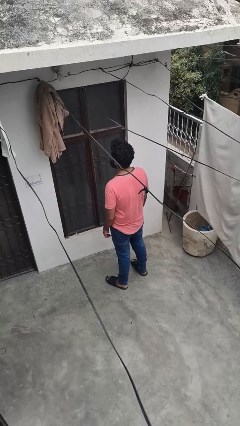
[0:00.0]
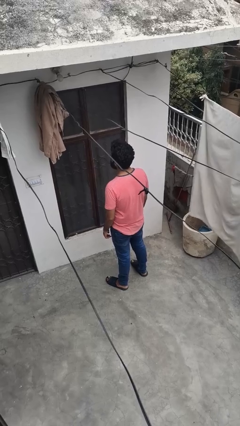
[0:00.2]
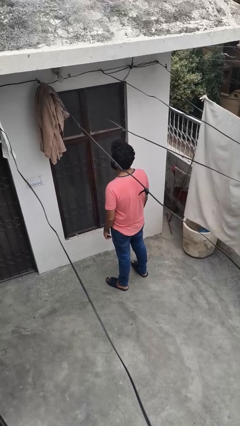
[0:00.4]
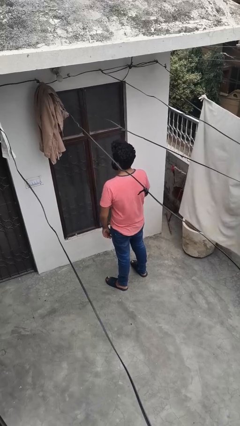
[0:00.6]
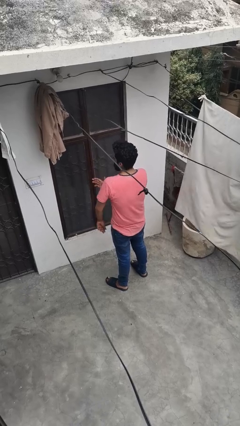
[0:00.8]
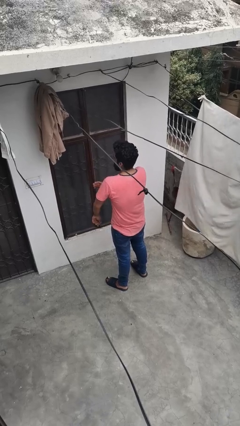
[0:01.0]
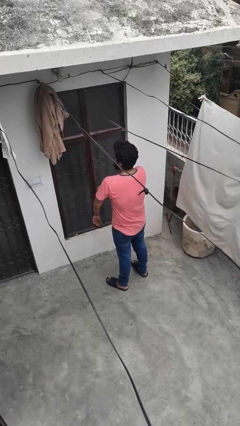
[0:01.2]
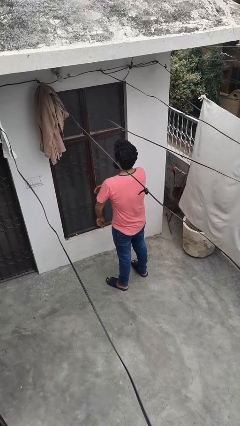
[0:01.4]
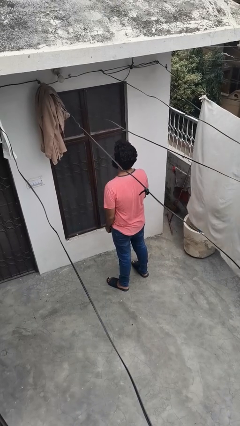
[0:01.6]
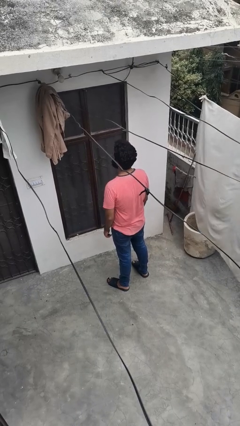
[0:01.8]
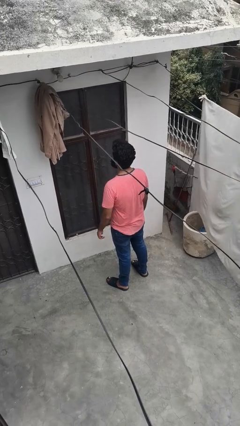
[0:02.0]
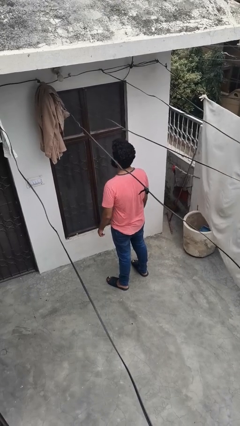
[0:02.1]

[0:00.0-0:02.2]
person swats bug

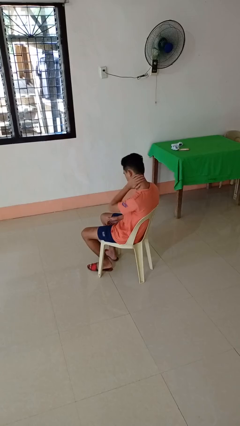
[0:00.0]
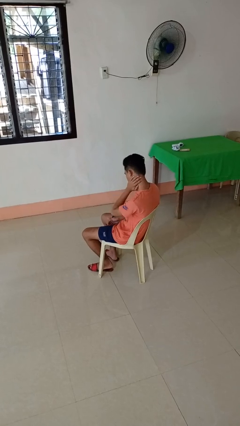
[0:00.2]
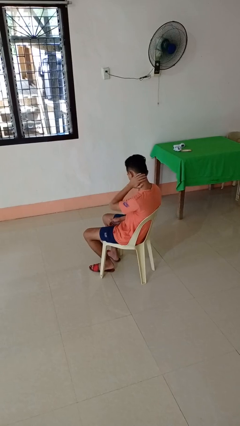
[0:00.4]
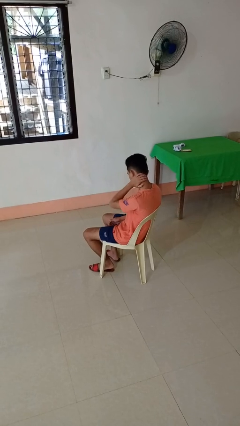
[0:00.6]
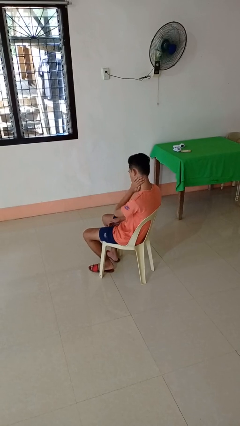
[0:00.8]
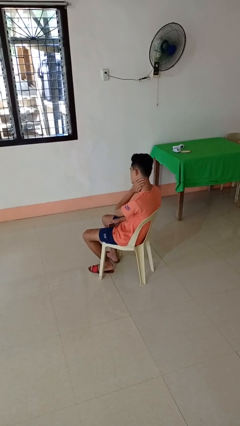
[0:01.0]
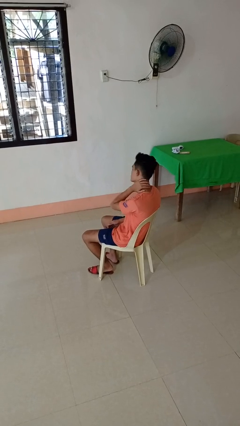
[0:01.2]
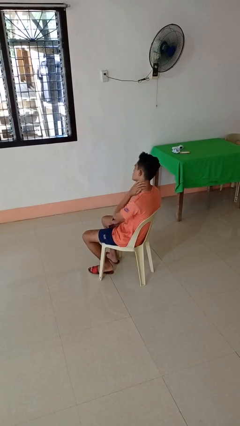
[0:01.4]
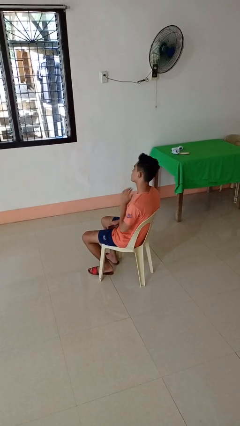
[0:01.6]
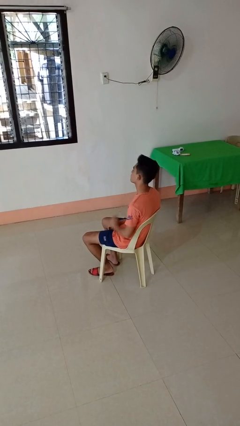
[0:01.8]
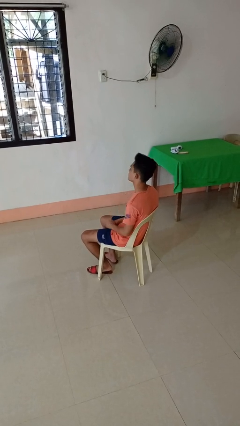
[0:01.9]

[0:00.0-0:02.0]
person rubs neck

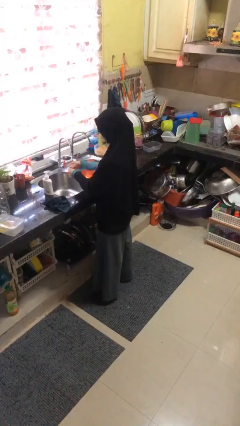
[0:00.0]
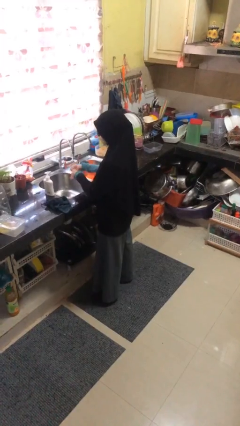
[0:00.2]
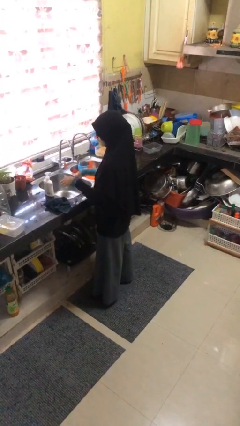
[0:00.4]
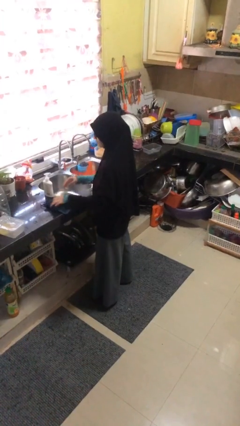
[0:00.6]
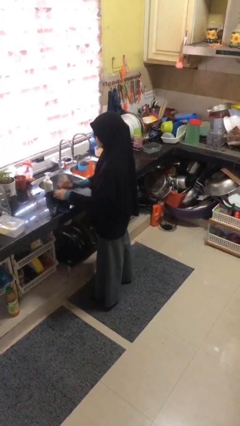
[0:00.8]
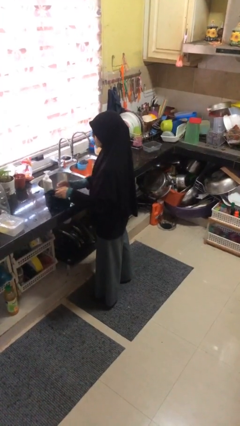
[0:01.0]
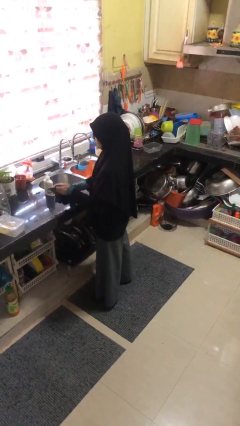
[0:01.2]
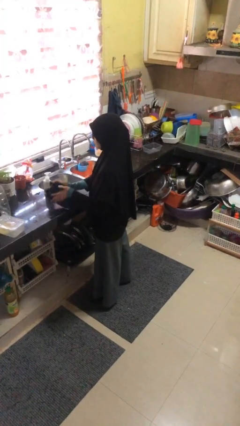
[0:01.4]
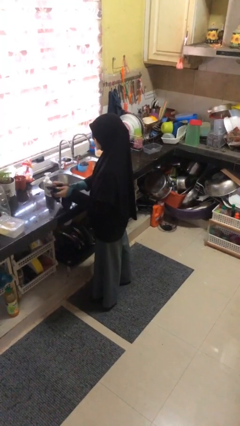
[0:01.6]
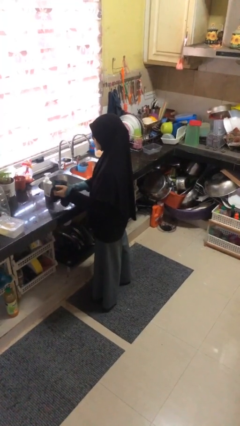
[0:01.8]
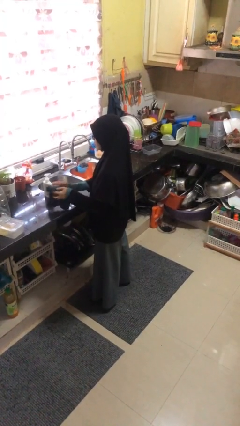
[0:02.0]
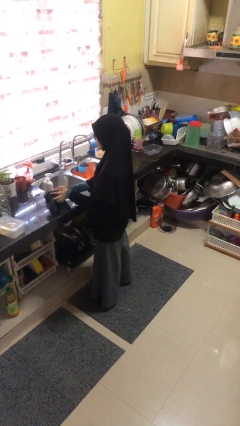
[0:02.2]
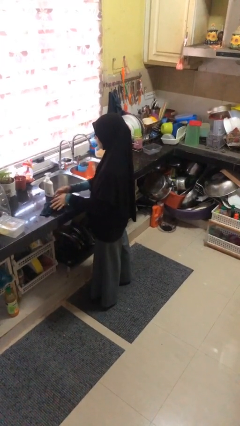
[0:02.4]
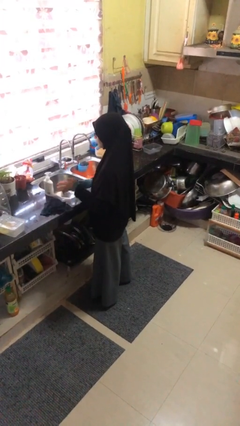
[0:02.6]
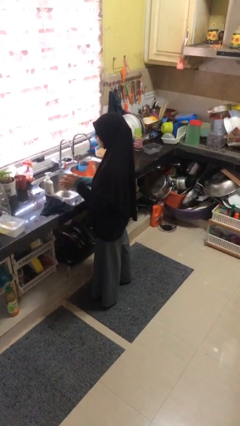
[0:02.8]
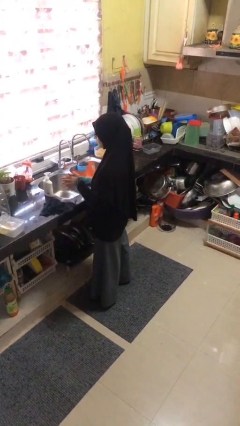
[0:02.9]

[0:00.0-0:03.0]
person dries hands with towel

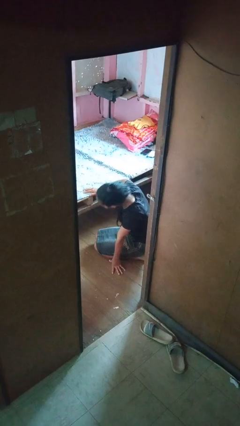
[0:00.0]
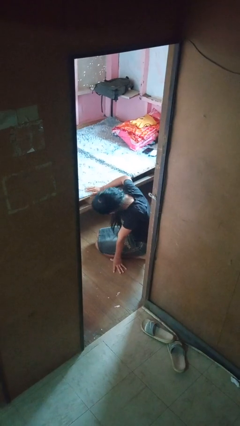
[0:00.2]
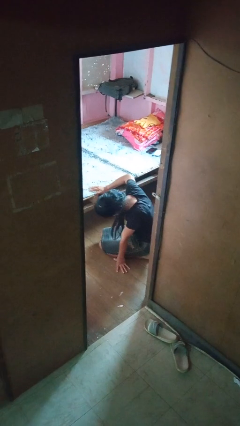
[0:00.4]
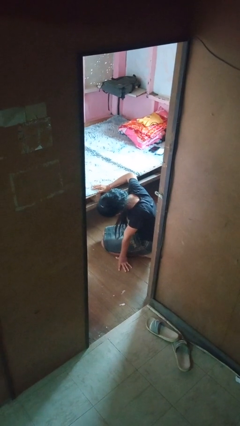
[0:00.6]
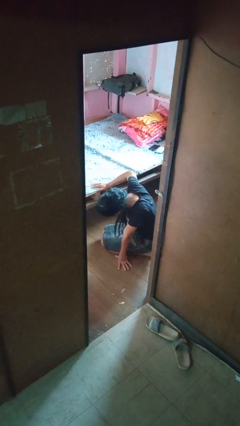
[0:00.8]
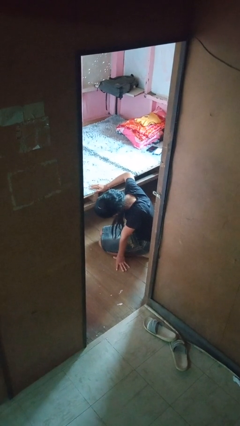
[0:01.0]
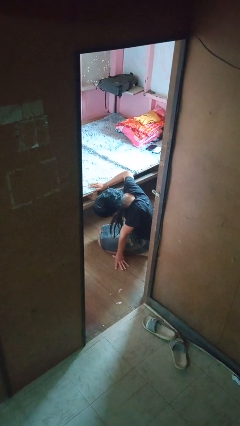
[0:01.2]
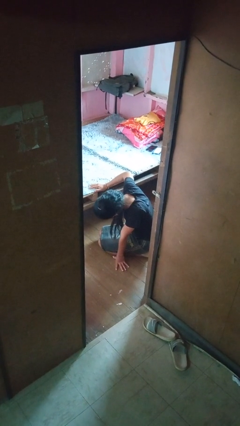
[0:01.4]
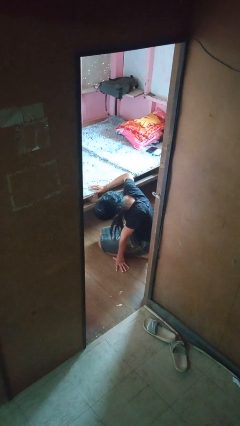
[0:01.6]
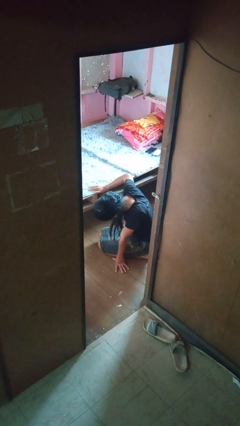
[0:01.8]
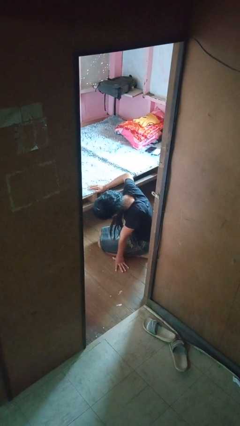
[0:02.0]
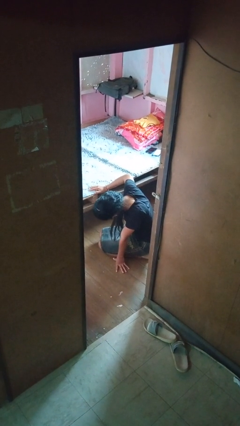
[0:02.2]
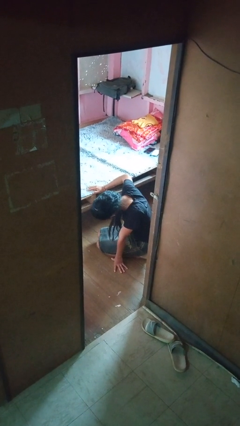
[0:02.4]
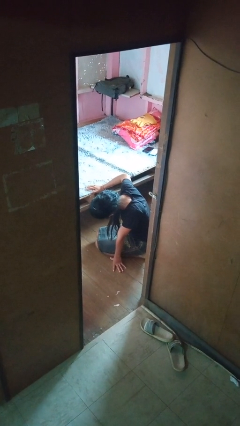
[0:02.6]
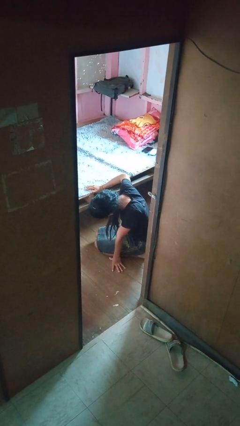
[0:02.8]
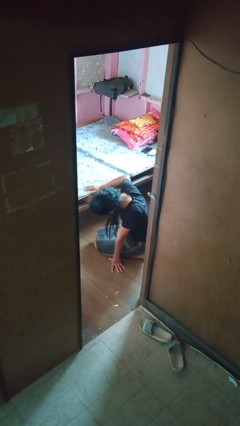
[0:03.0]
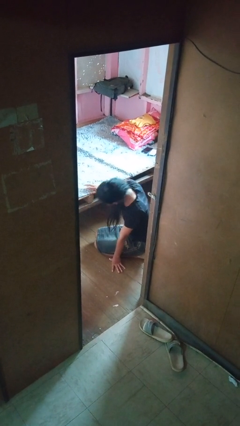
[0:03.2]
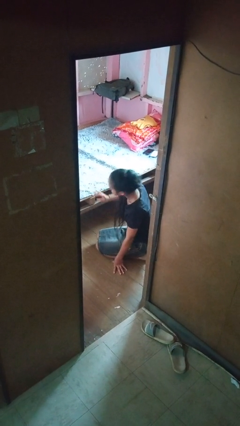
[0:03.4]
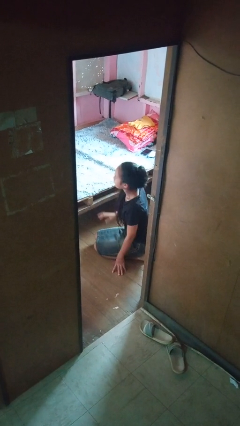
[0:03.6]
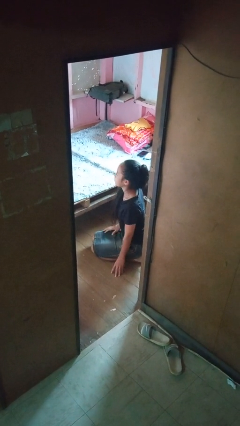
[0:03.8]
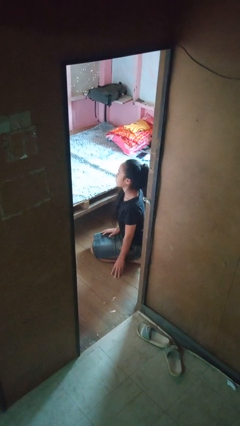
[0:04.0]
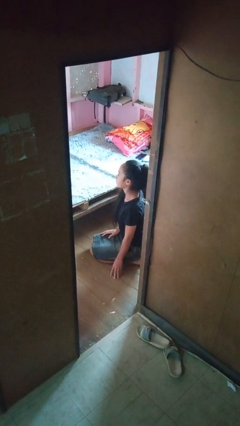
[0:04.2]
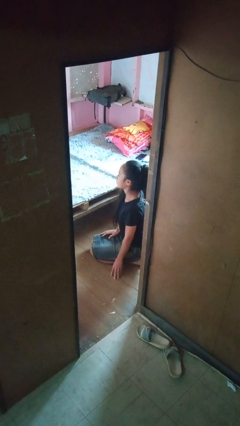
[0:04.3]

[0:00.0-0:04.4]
person searches under bed

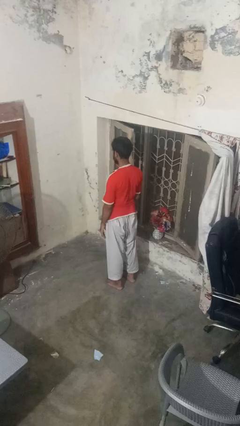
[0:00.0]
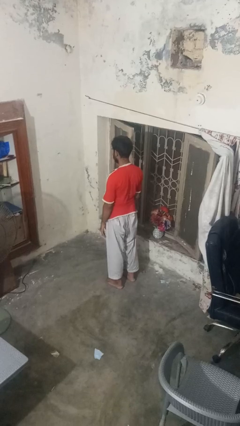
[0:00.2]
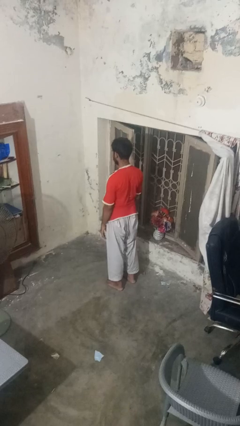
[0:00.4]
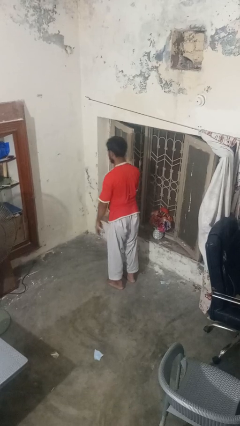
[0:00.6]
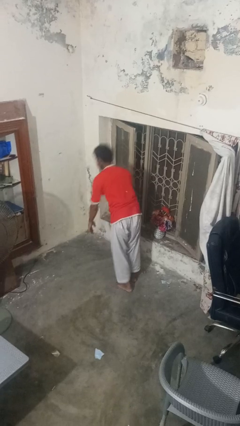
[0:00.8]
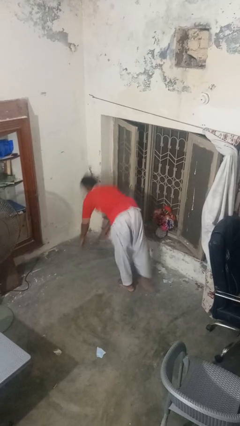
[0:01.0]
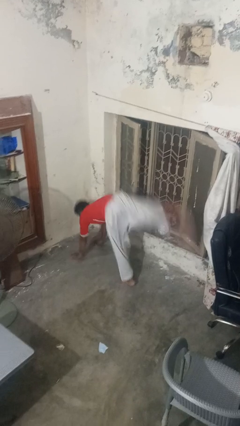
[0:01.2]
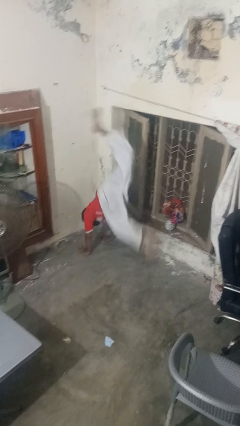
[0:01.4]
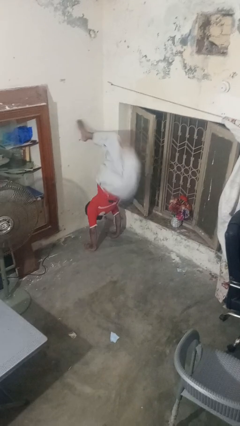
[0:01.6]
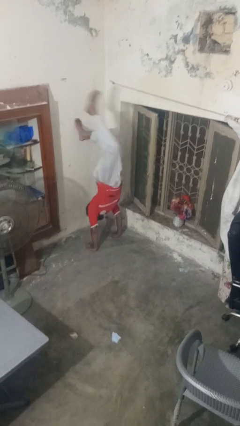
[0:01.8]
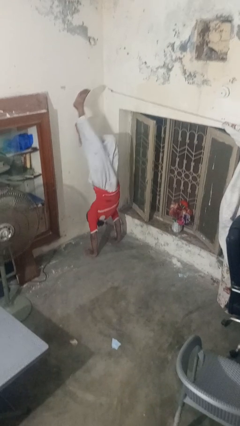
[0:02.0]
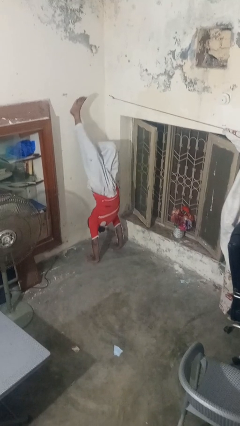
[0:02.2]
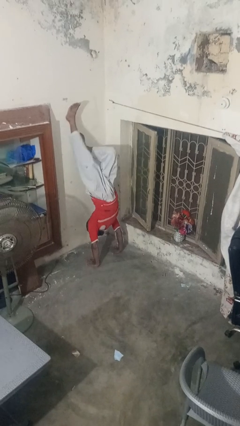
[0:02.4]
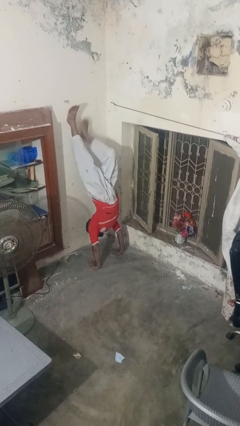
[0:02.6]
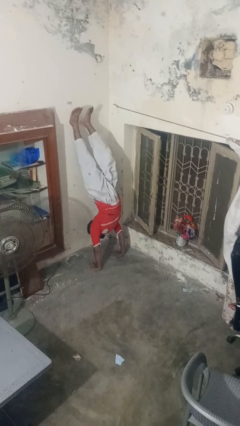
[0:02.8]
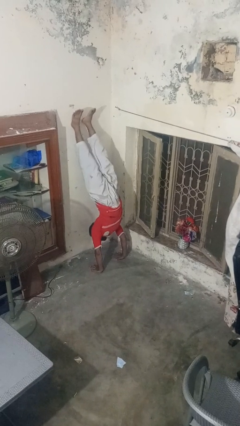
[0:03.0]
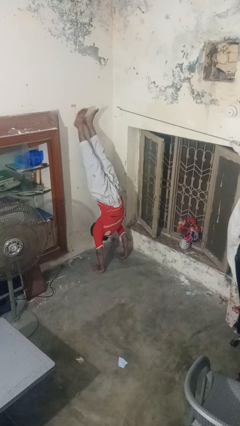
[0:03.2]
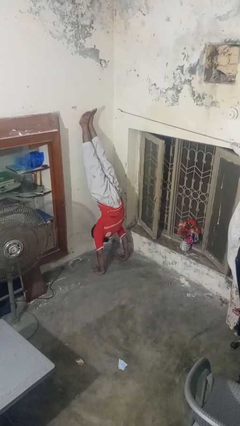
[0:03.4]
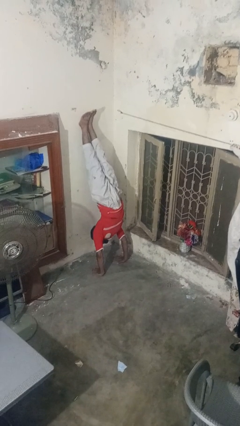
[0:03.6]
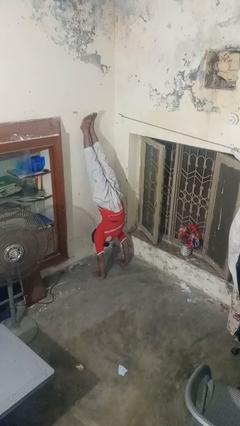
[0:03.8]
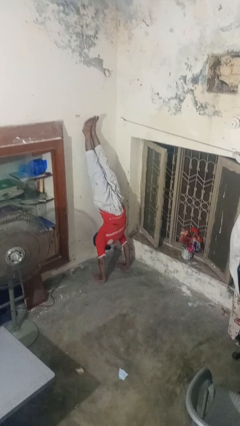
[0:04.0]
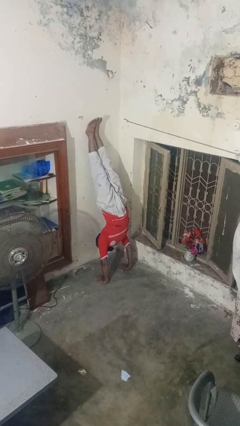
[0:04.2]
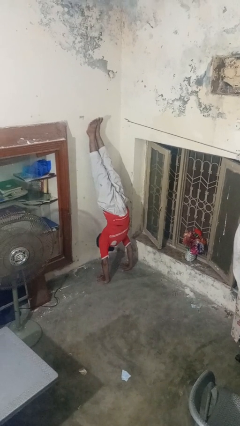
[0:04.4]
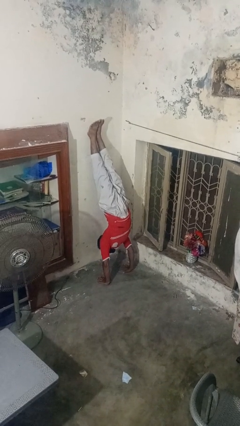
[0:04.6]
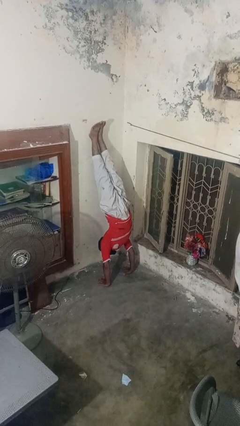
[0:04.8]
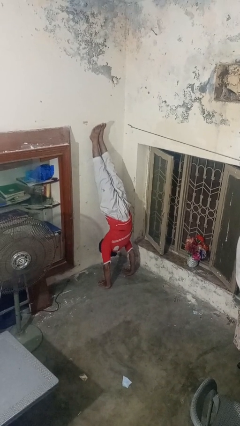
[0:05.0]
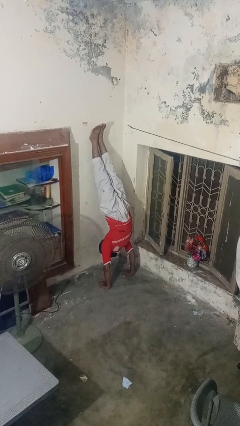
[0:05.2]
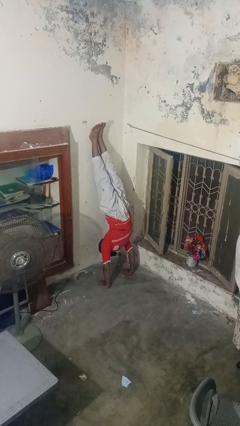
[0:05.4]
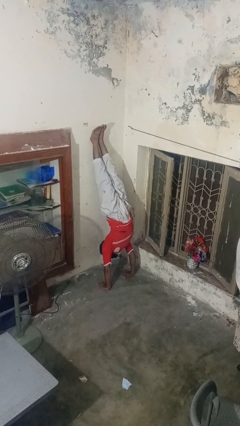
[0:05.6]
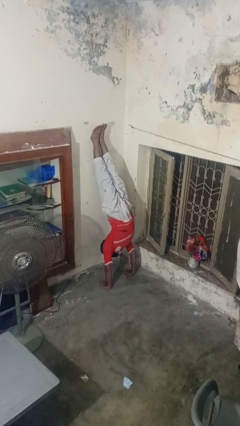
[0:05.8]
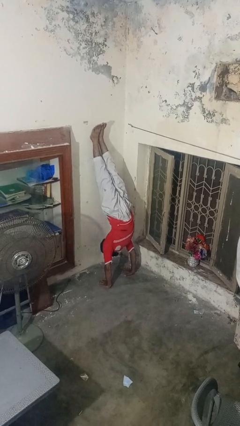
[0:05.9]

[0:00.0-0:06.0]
person handstand
